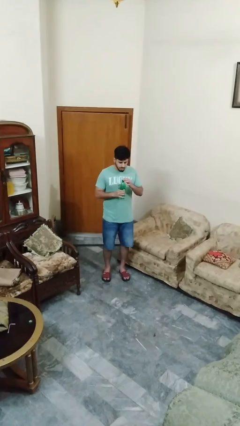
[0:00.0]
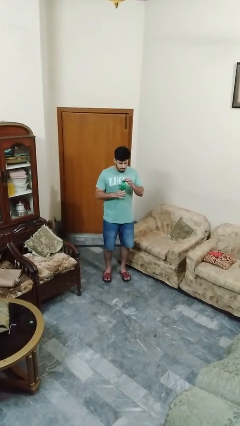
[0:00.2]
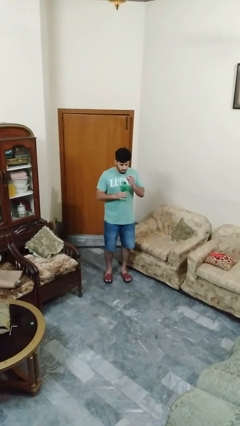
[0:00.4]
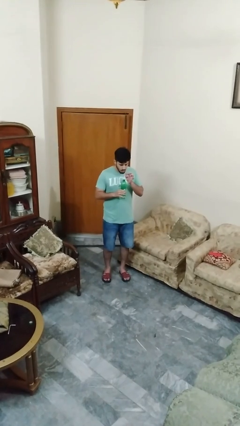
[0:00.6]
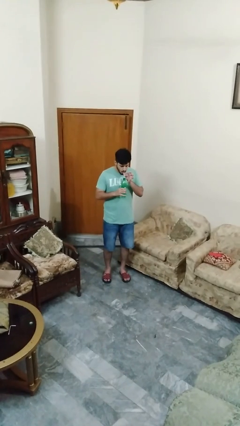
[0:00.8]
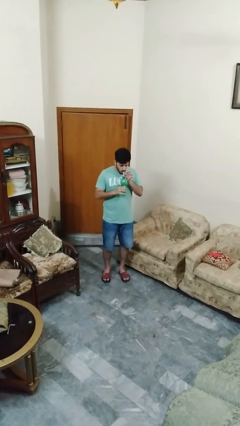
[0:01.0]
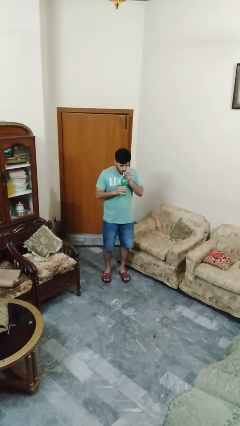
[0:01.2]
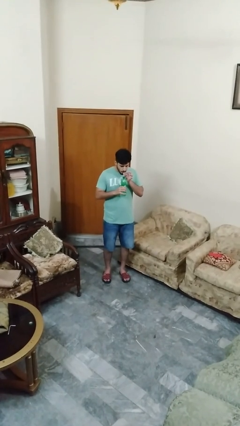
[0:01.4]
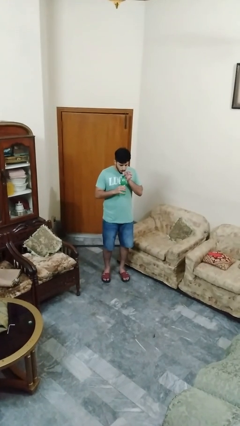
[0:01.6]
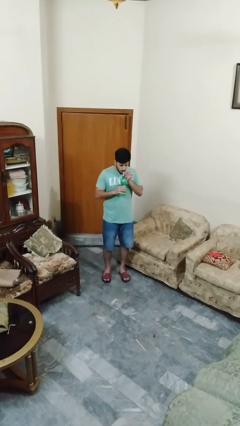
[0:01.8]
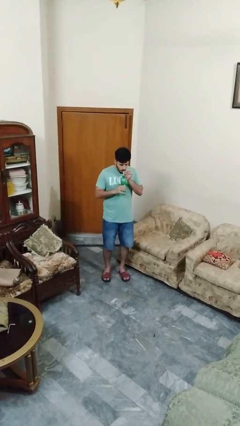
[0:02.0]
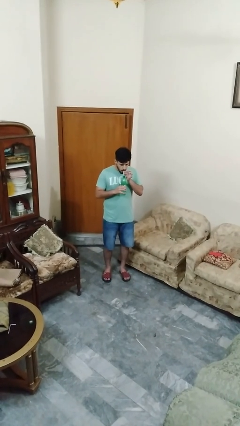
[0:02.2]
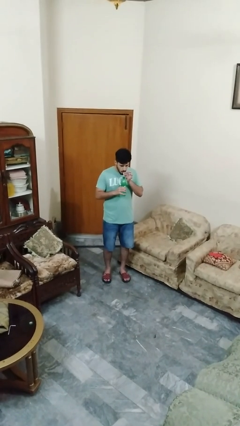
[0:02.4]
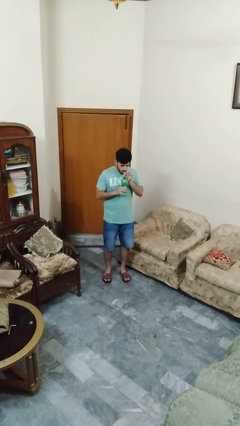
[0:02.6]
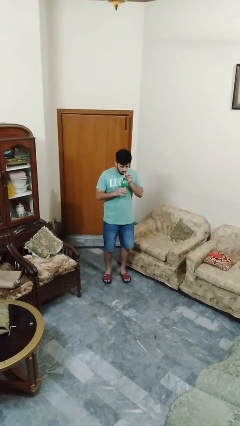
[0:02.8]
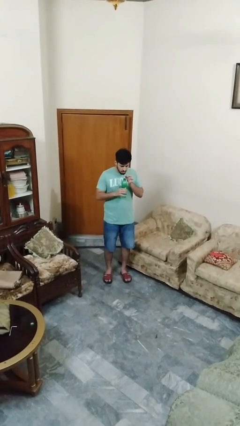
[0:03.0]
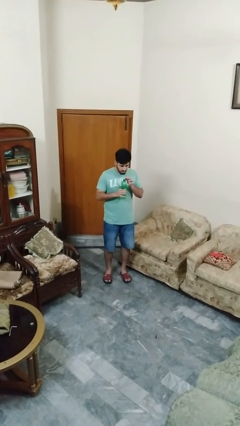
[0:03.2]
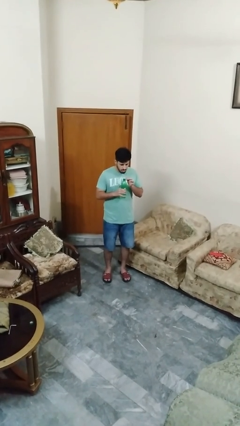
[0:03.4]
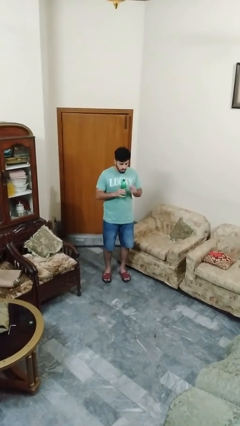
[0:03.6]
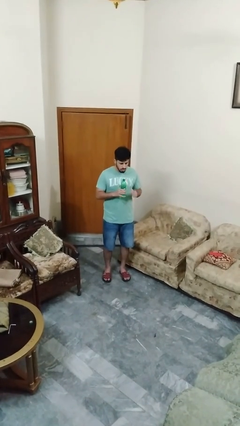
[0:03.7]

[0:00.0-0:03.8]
person drinks from straw

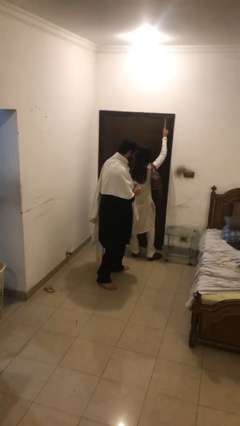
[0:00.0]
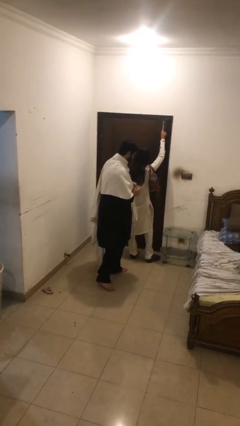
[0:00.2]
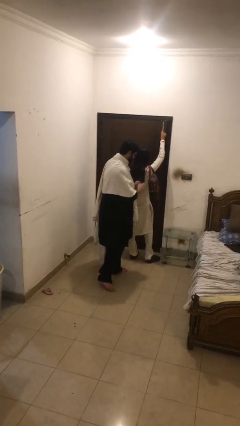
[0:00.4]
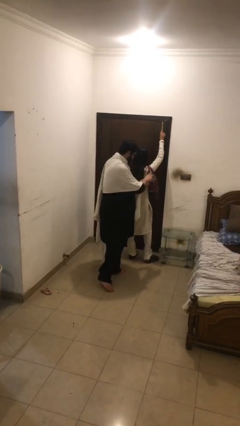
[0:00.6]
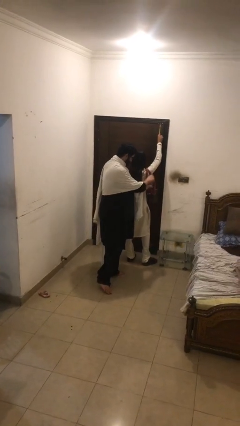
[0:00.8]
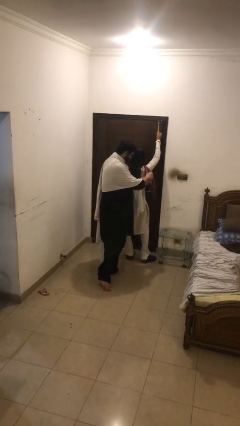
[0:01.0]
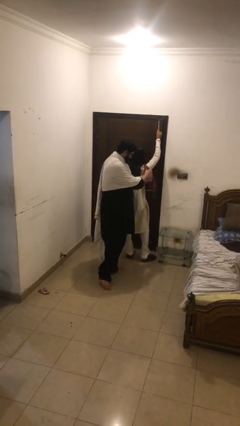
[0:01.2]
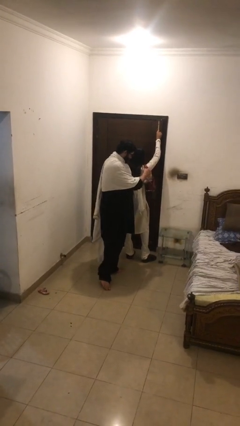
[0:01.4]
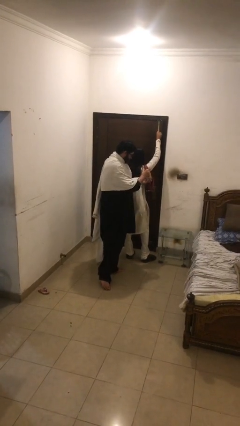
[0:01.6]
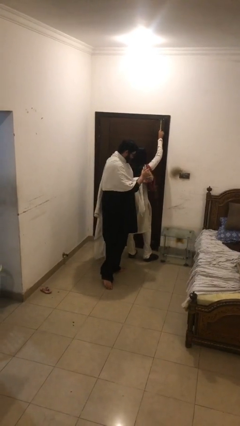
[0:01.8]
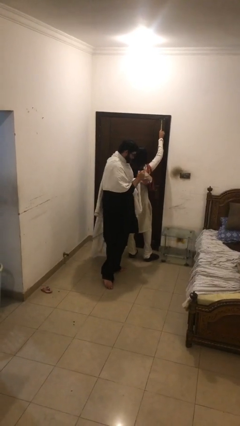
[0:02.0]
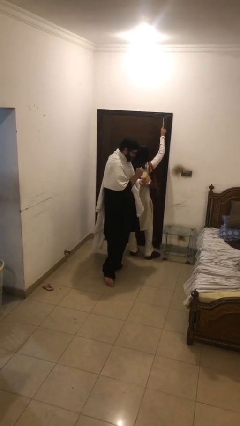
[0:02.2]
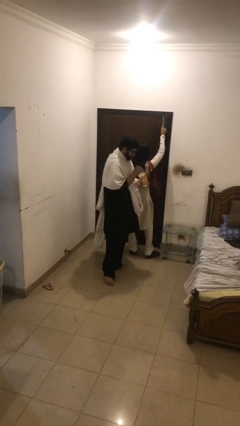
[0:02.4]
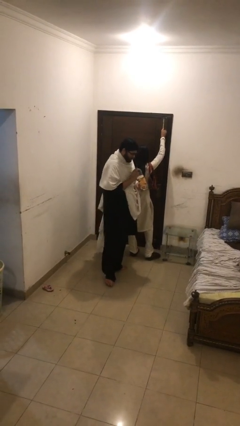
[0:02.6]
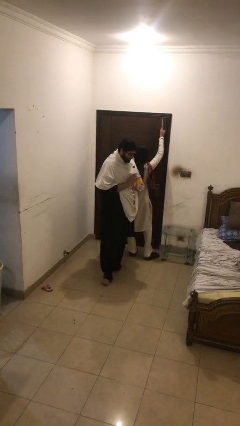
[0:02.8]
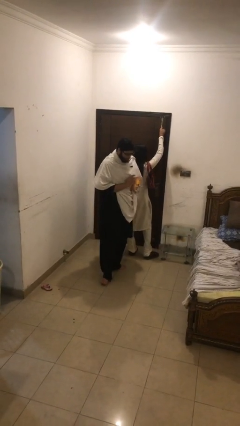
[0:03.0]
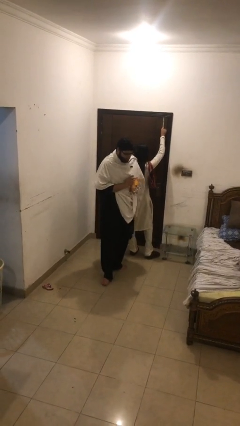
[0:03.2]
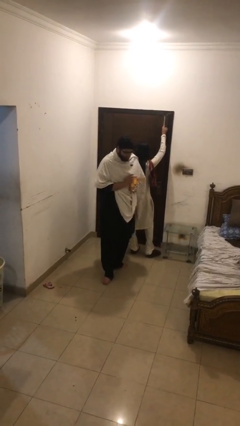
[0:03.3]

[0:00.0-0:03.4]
person steals object from person

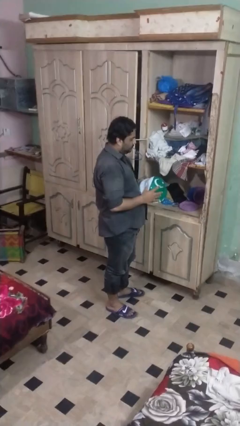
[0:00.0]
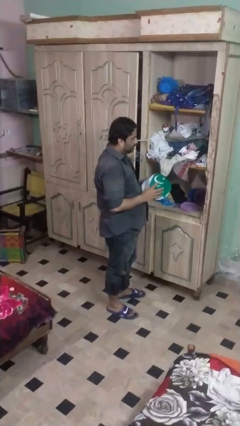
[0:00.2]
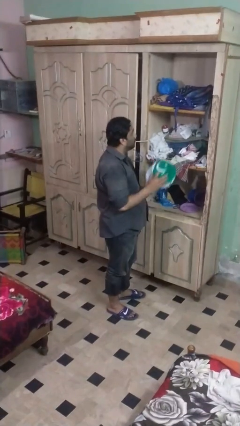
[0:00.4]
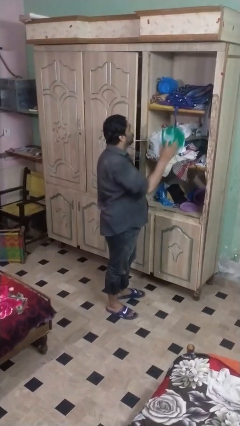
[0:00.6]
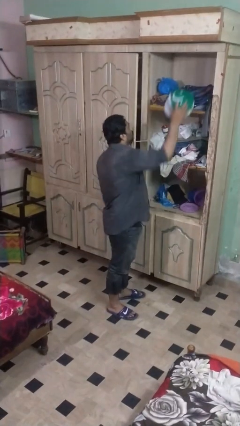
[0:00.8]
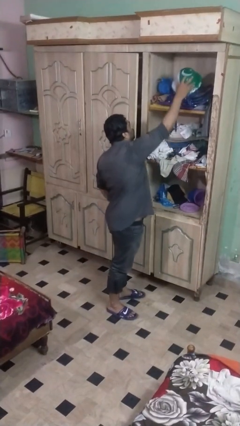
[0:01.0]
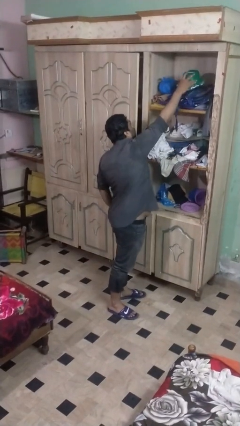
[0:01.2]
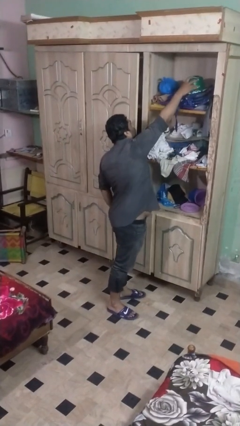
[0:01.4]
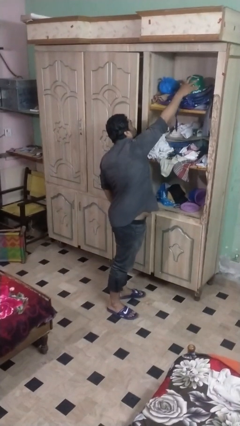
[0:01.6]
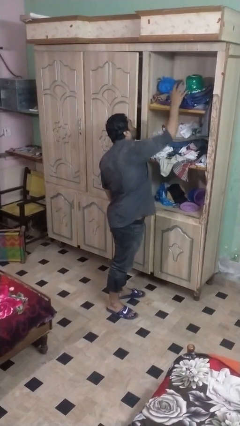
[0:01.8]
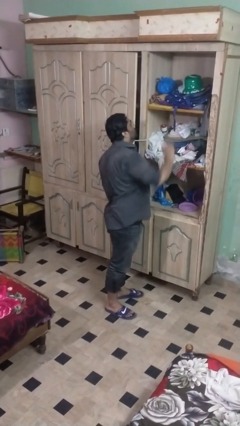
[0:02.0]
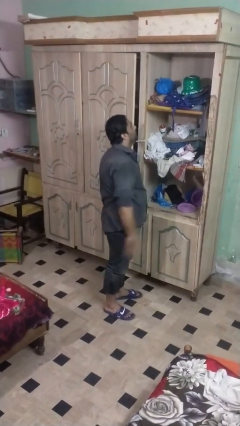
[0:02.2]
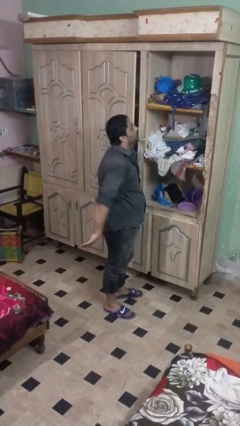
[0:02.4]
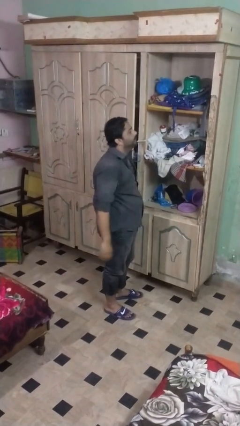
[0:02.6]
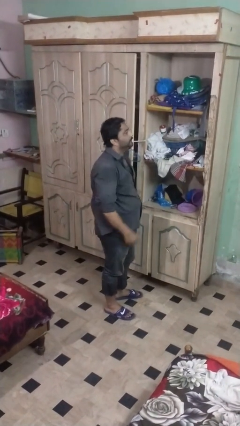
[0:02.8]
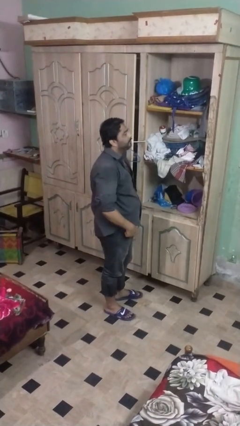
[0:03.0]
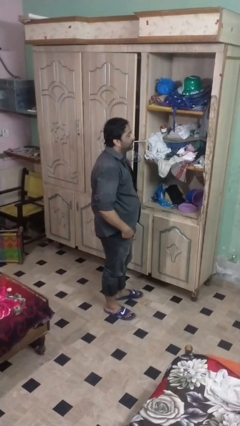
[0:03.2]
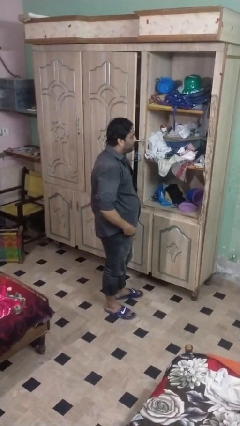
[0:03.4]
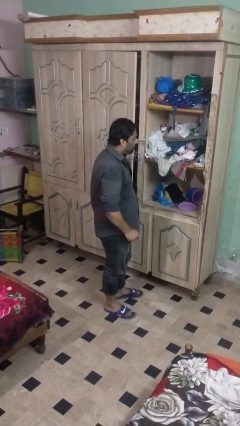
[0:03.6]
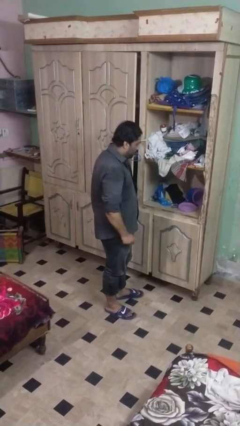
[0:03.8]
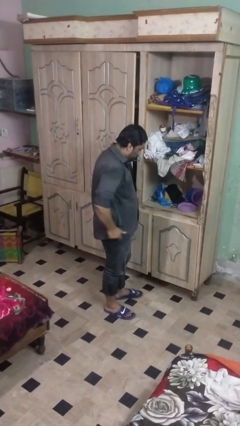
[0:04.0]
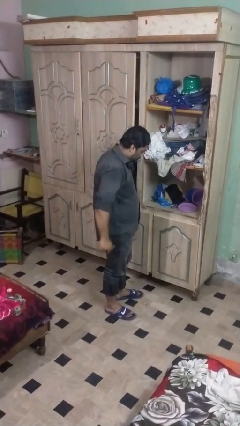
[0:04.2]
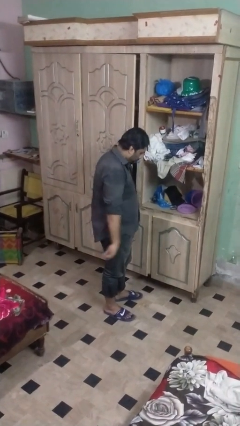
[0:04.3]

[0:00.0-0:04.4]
person puts down object on shelf

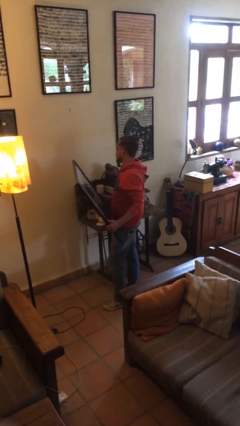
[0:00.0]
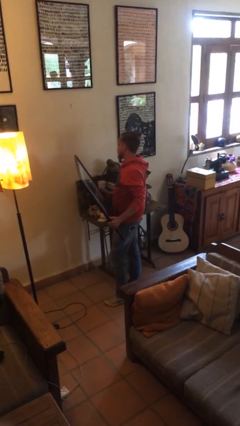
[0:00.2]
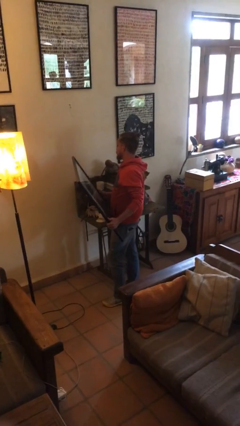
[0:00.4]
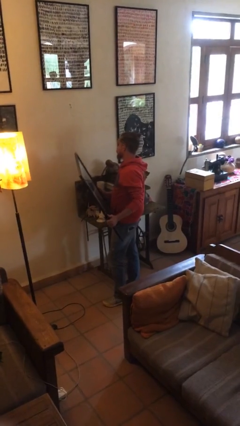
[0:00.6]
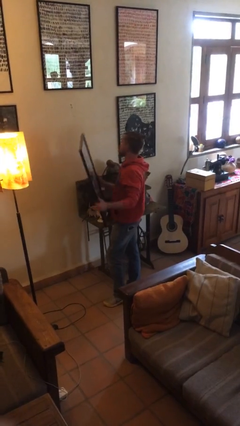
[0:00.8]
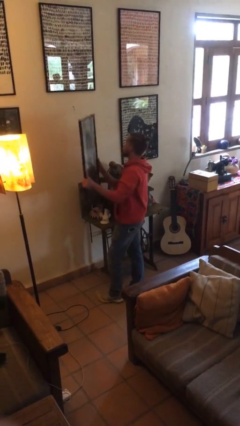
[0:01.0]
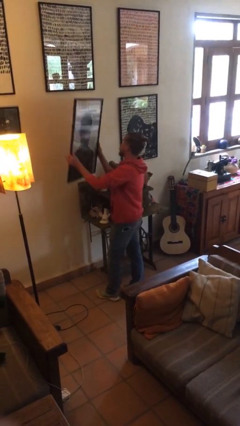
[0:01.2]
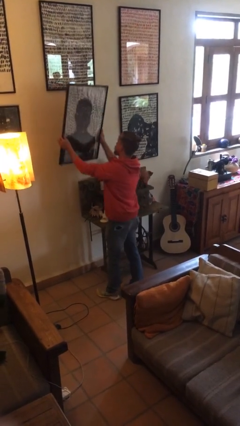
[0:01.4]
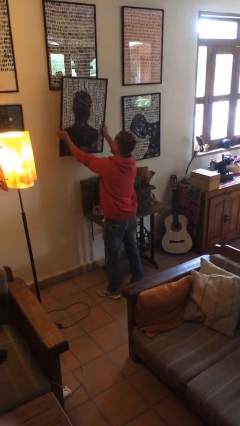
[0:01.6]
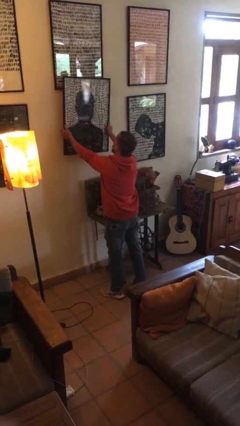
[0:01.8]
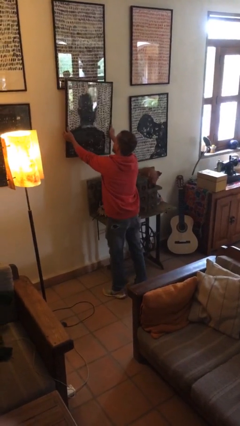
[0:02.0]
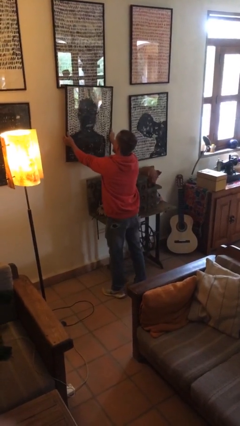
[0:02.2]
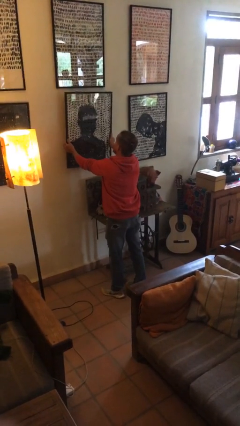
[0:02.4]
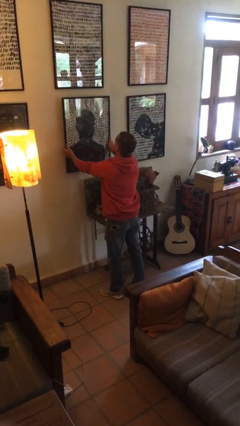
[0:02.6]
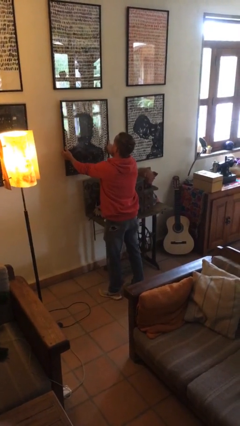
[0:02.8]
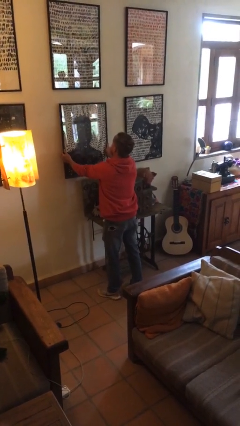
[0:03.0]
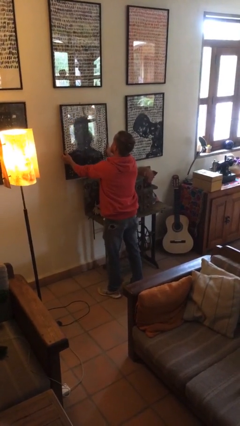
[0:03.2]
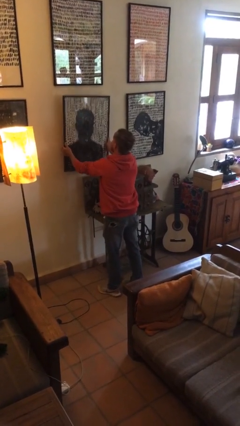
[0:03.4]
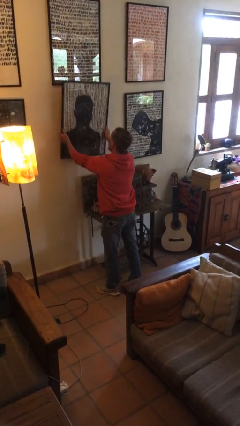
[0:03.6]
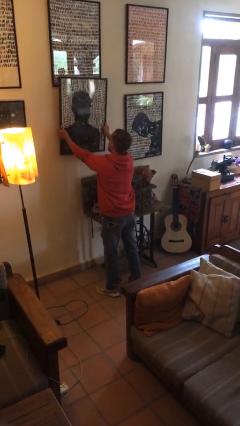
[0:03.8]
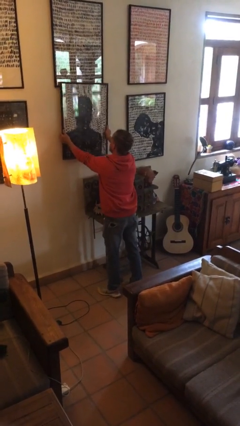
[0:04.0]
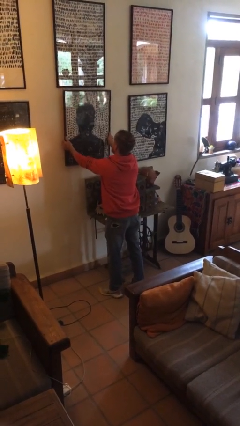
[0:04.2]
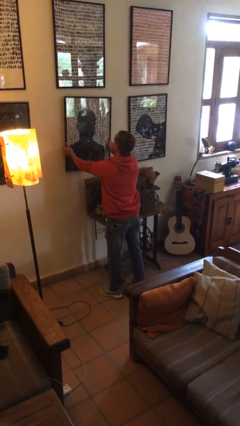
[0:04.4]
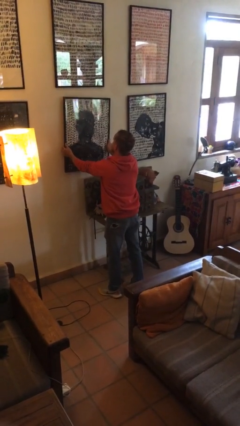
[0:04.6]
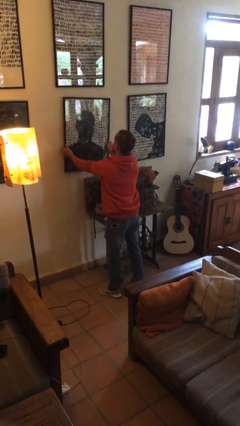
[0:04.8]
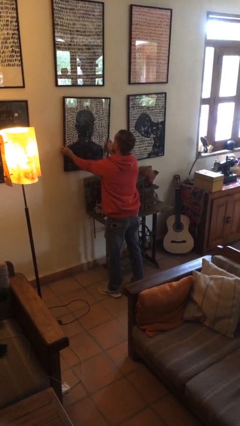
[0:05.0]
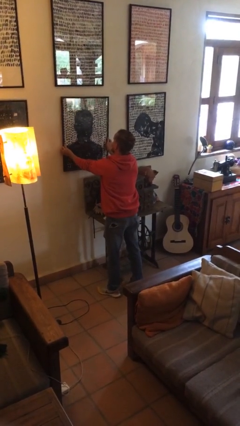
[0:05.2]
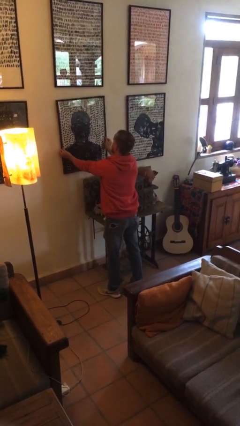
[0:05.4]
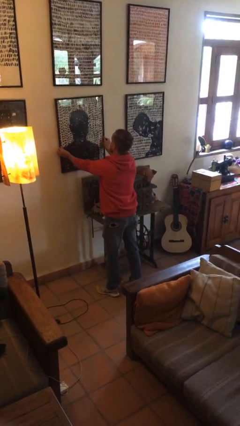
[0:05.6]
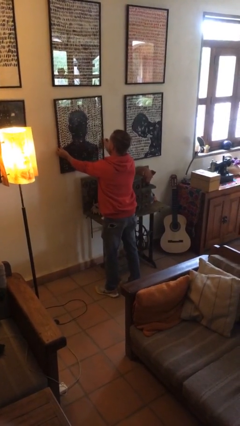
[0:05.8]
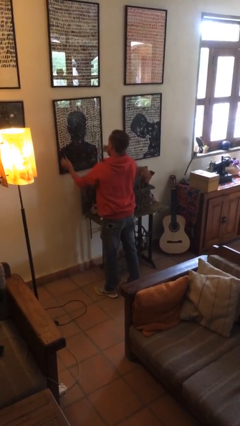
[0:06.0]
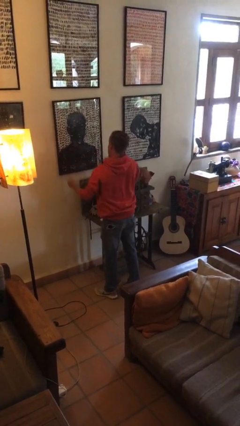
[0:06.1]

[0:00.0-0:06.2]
person puts up picture frame
